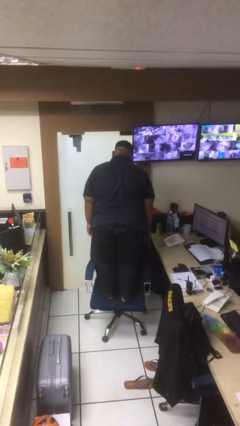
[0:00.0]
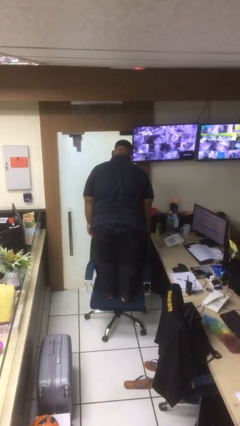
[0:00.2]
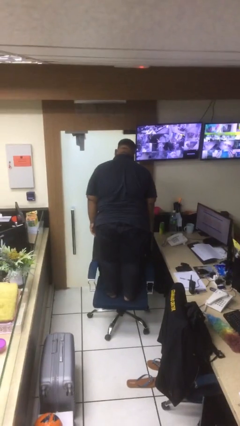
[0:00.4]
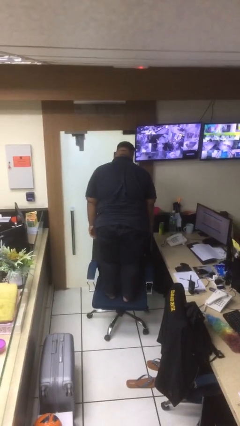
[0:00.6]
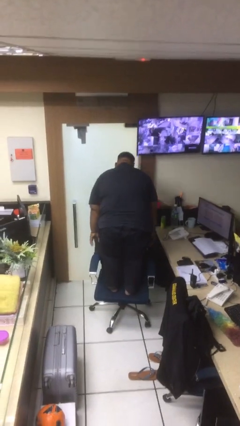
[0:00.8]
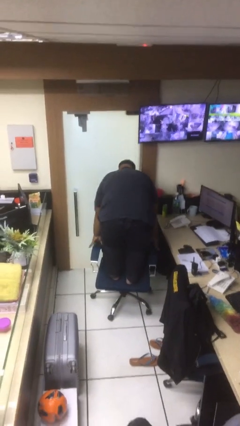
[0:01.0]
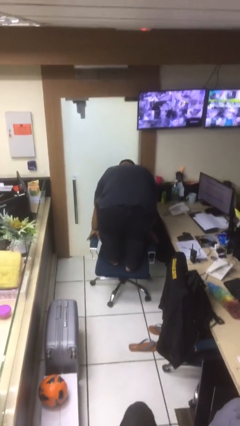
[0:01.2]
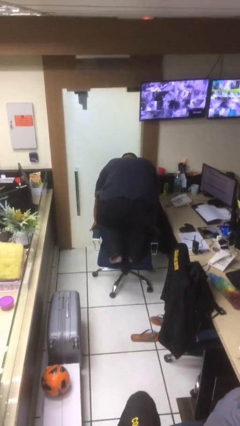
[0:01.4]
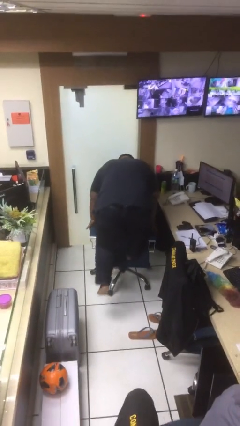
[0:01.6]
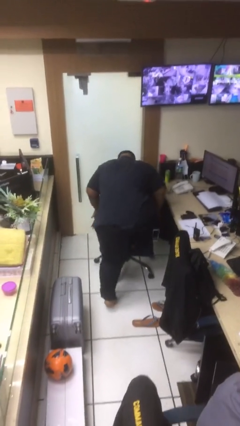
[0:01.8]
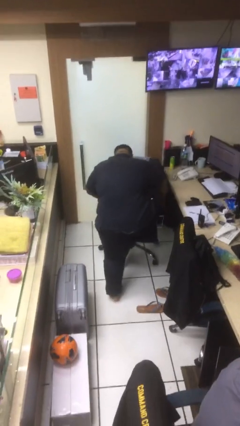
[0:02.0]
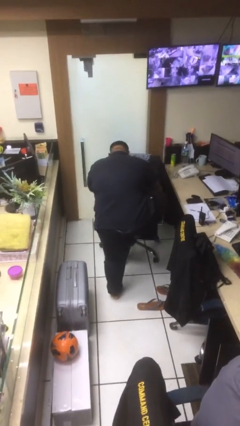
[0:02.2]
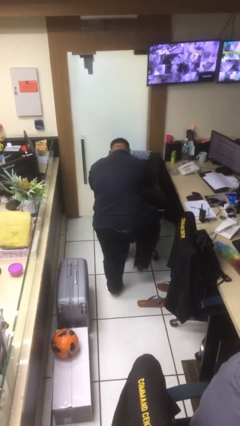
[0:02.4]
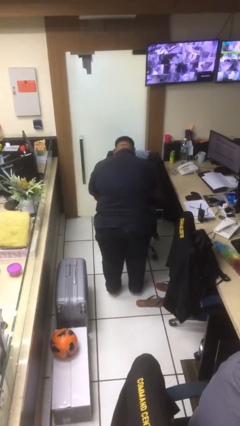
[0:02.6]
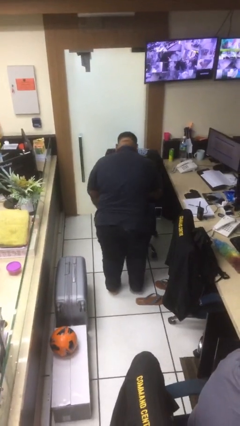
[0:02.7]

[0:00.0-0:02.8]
person climbs off chair

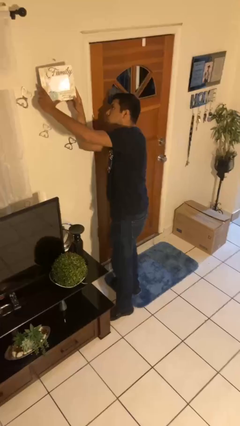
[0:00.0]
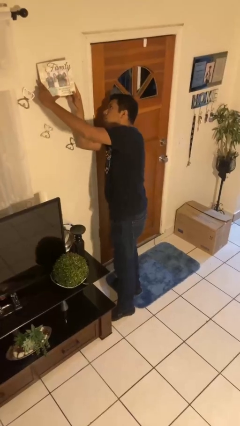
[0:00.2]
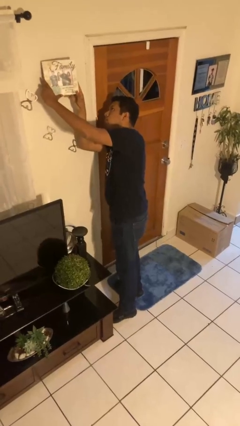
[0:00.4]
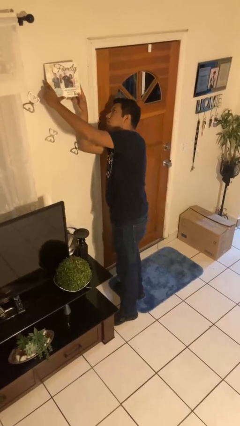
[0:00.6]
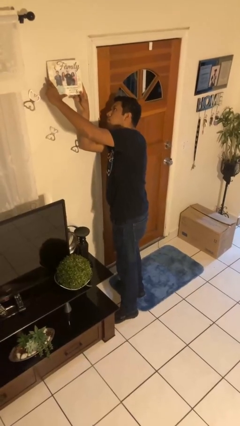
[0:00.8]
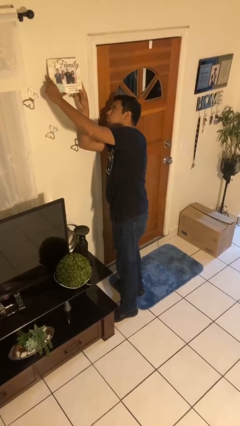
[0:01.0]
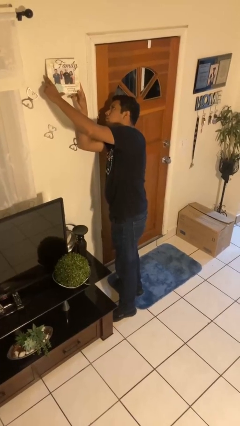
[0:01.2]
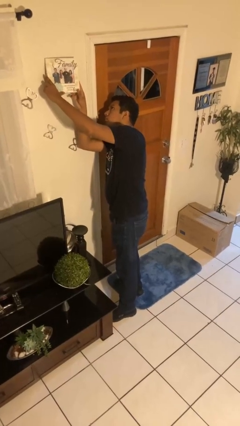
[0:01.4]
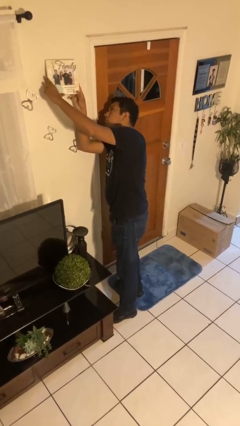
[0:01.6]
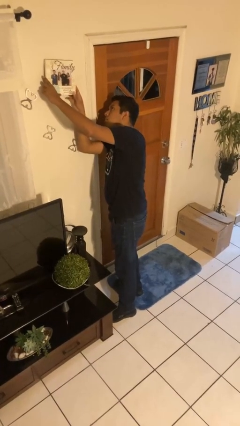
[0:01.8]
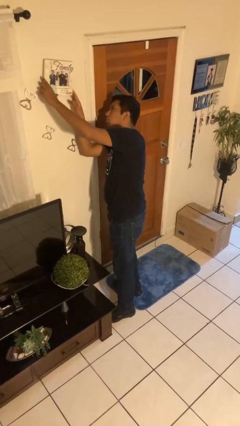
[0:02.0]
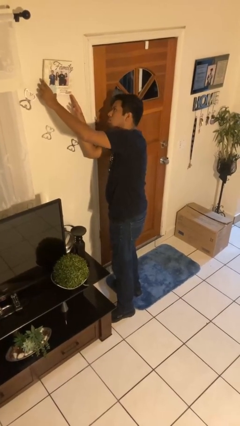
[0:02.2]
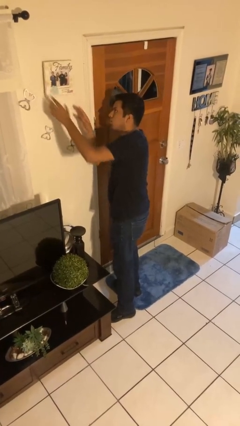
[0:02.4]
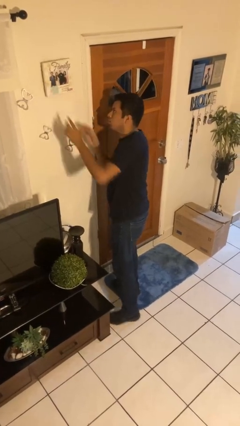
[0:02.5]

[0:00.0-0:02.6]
person puts up picture frame

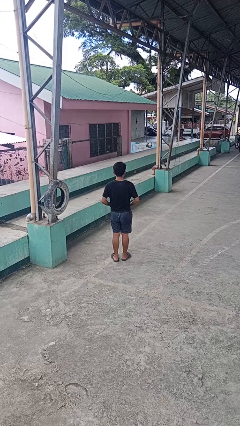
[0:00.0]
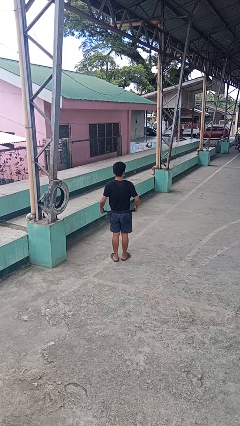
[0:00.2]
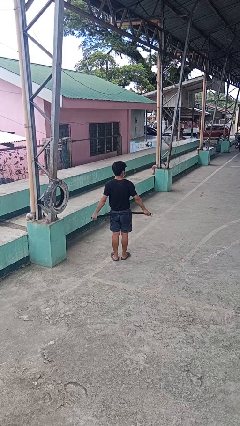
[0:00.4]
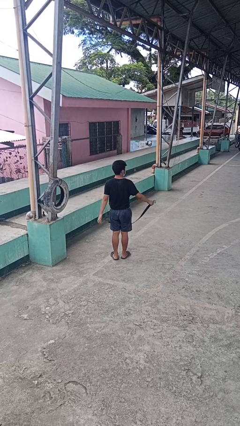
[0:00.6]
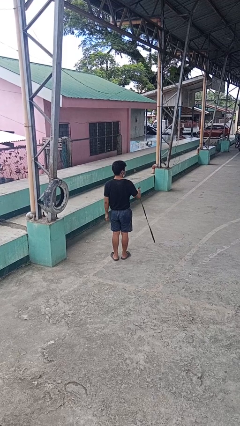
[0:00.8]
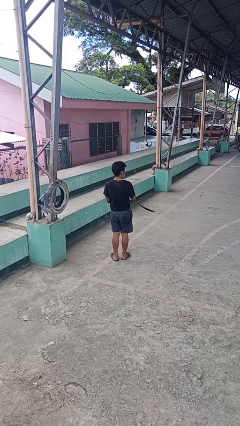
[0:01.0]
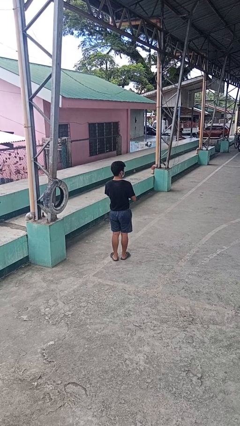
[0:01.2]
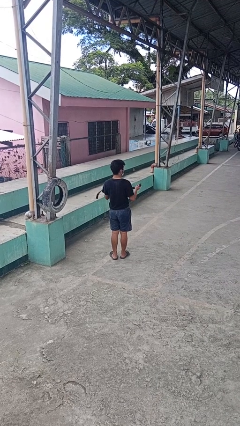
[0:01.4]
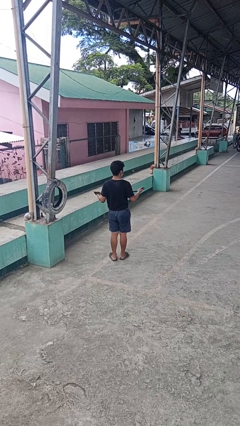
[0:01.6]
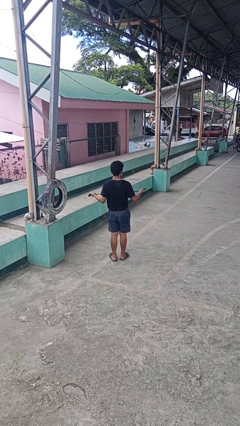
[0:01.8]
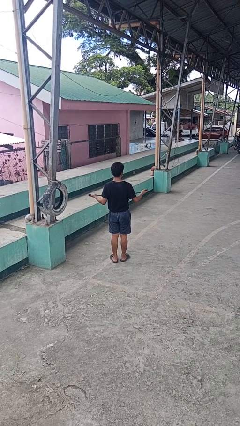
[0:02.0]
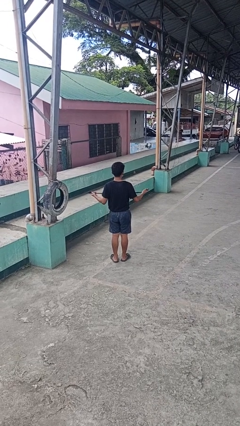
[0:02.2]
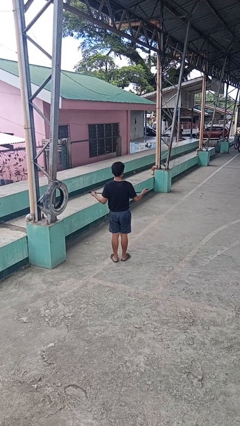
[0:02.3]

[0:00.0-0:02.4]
person takes off belt

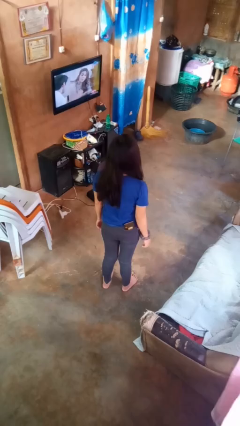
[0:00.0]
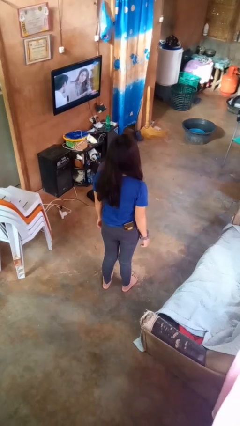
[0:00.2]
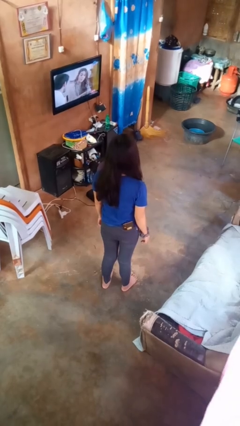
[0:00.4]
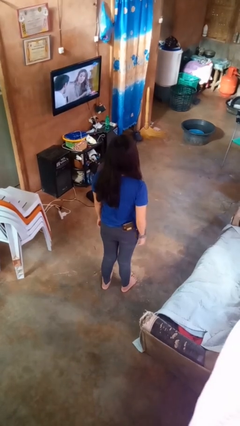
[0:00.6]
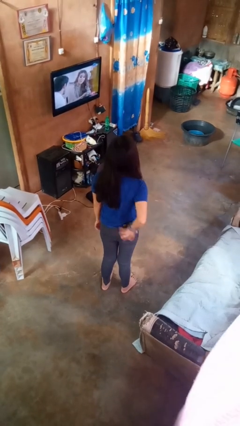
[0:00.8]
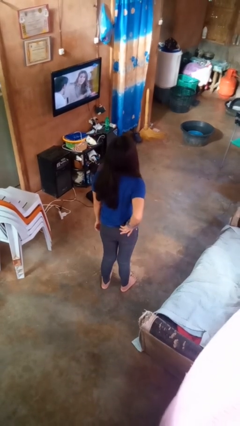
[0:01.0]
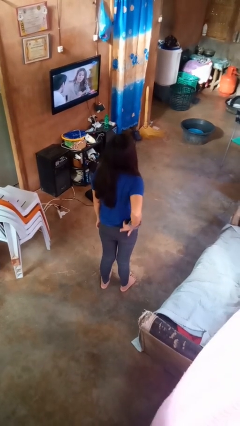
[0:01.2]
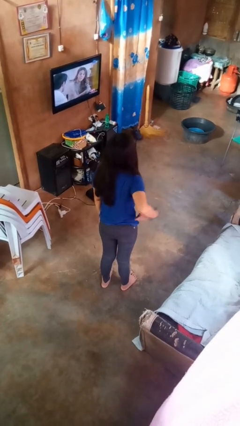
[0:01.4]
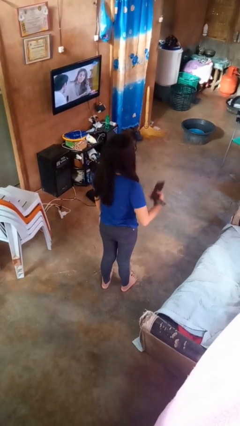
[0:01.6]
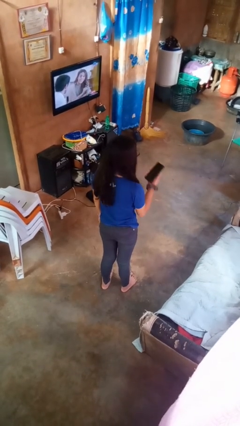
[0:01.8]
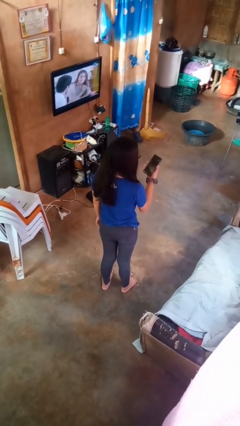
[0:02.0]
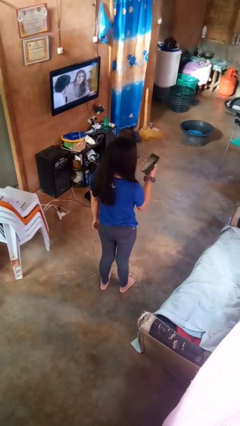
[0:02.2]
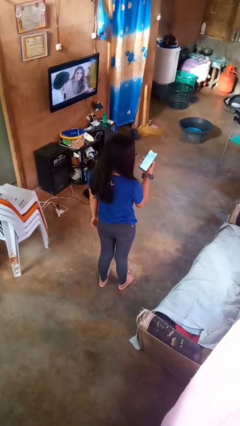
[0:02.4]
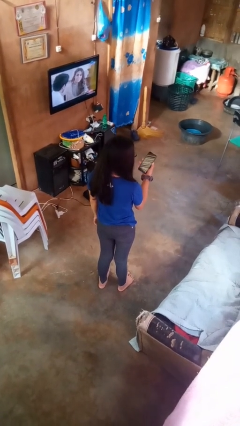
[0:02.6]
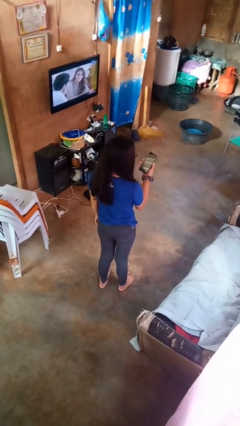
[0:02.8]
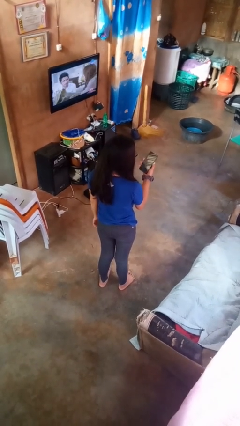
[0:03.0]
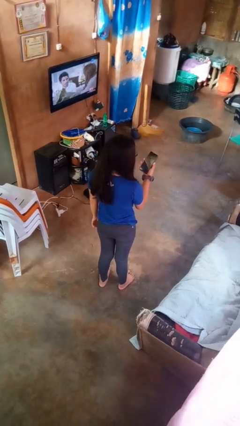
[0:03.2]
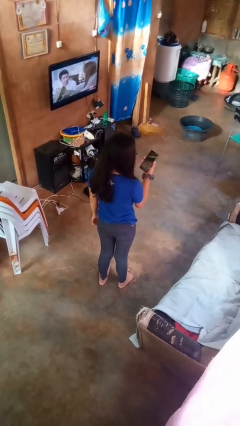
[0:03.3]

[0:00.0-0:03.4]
person takes phone from pocket

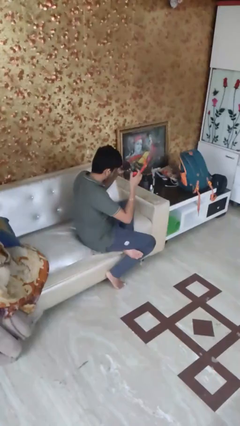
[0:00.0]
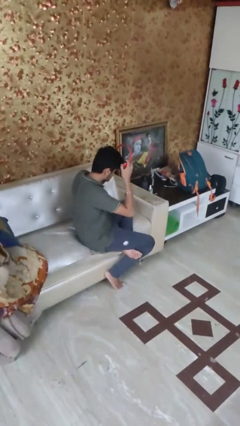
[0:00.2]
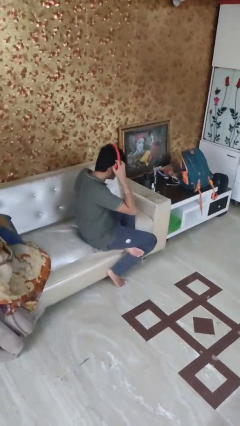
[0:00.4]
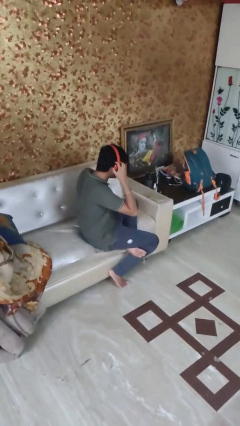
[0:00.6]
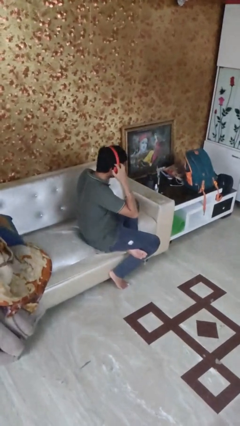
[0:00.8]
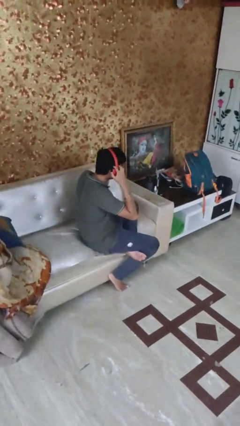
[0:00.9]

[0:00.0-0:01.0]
person puts on headphones

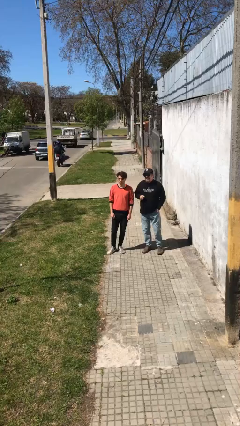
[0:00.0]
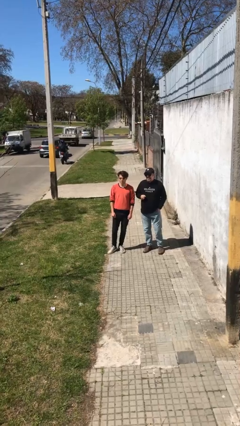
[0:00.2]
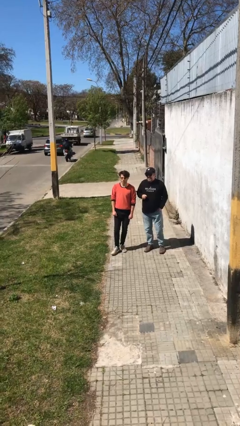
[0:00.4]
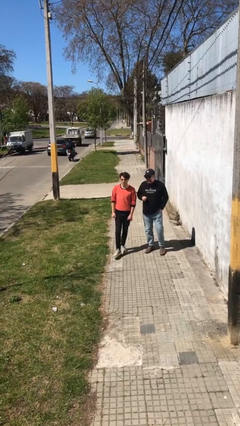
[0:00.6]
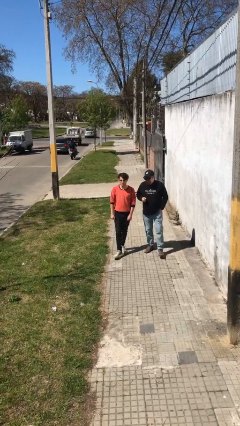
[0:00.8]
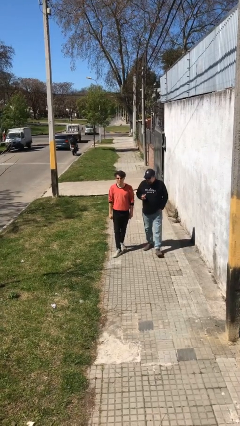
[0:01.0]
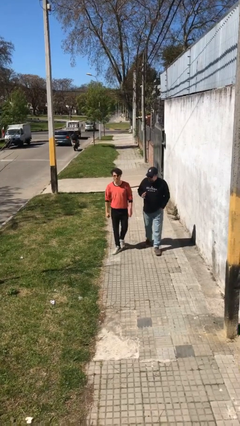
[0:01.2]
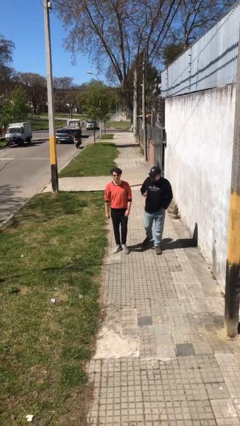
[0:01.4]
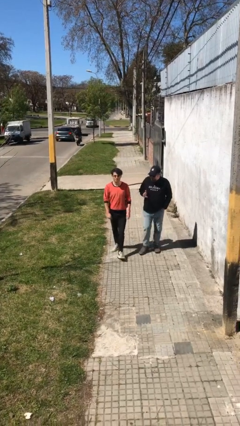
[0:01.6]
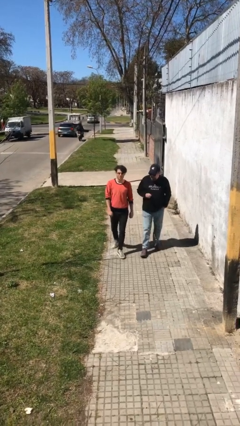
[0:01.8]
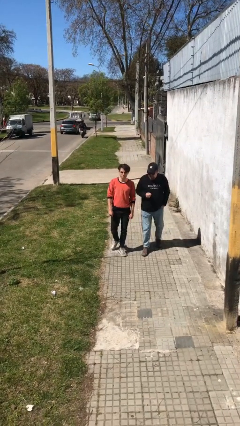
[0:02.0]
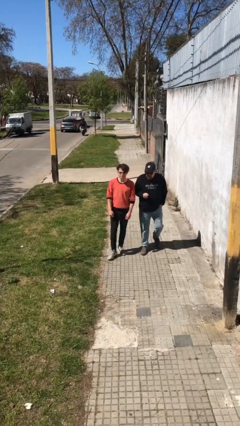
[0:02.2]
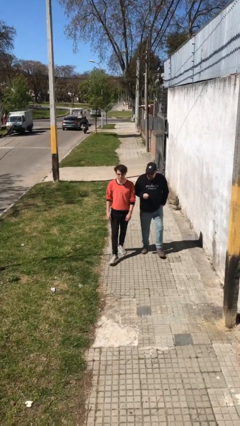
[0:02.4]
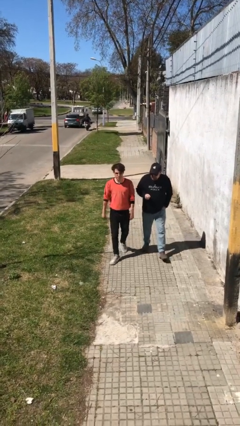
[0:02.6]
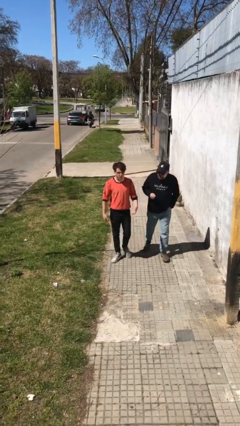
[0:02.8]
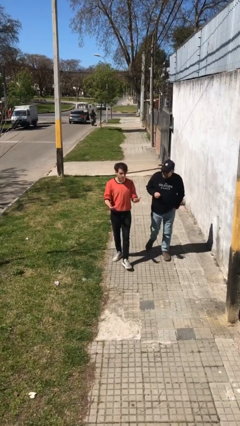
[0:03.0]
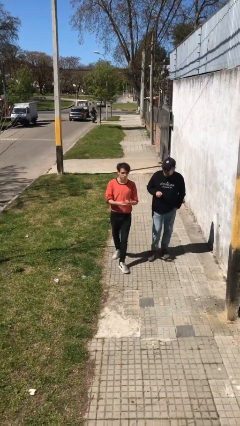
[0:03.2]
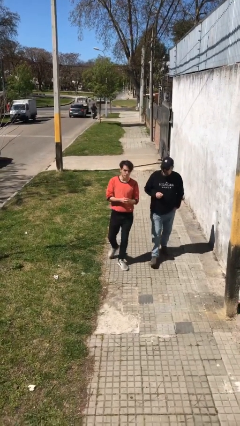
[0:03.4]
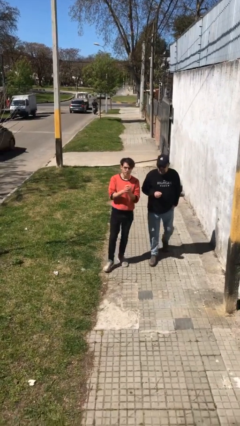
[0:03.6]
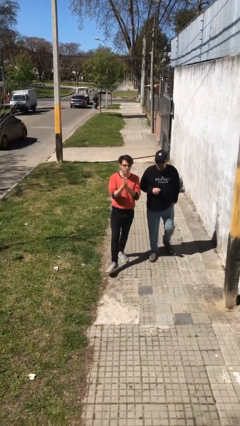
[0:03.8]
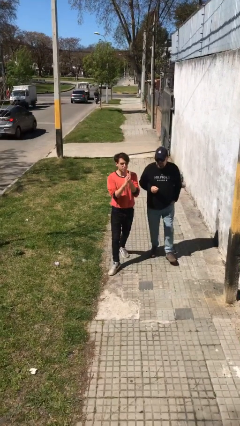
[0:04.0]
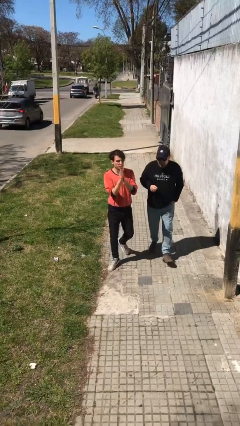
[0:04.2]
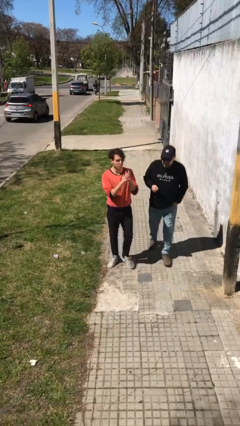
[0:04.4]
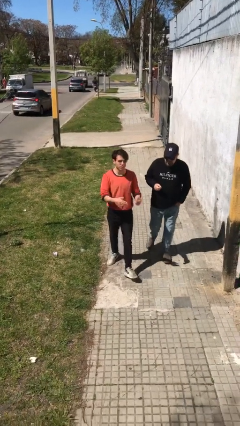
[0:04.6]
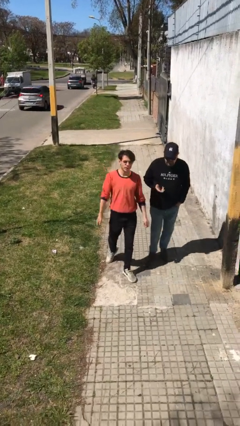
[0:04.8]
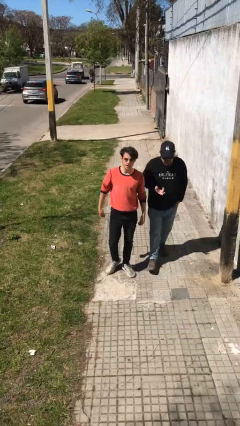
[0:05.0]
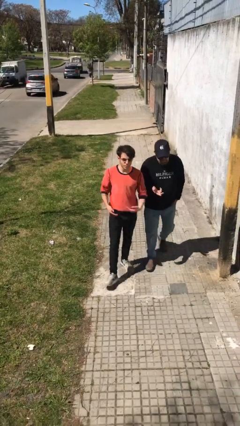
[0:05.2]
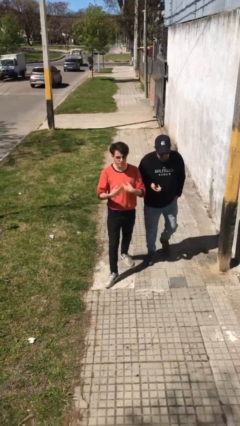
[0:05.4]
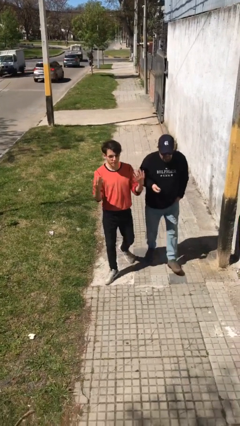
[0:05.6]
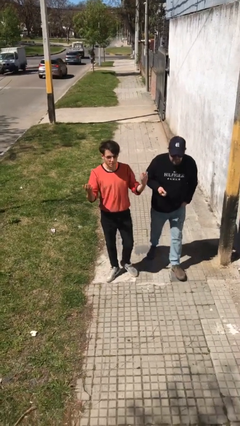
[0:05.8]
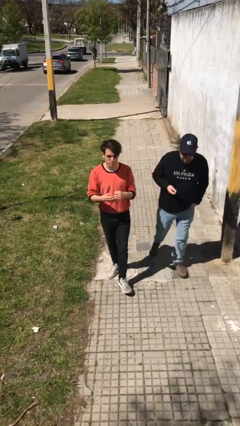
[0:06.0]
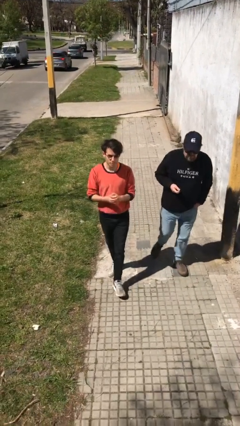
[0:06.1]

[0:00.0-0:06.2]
person talks to person
